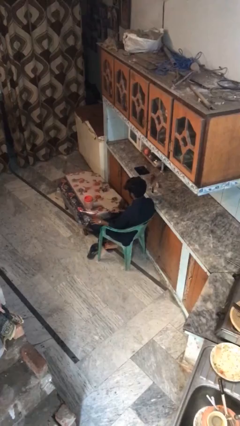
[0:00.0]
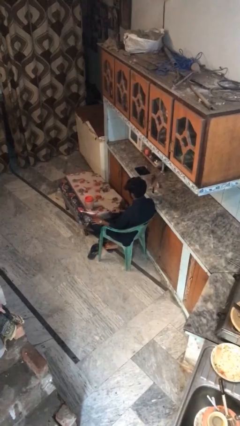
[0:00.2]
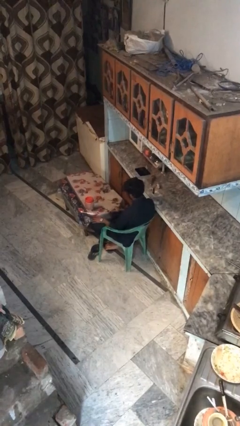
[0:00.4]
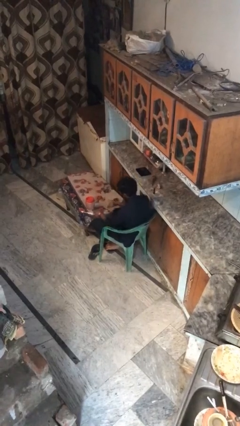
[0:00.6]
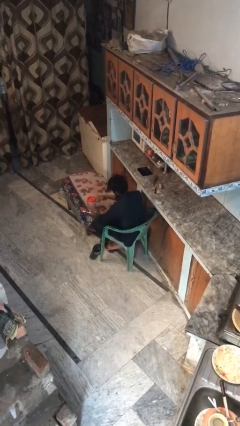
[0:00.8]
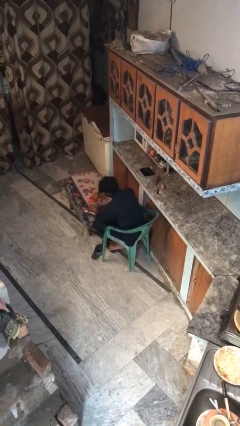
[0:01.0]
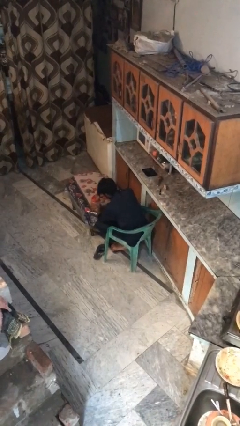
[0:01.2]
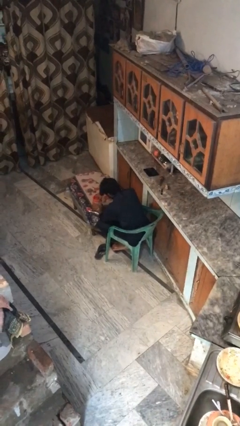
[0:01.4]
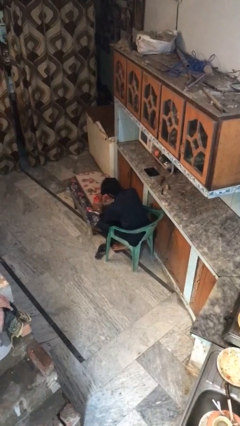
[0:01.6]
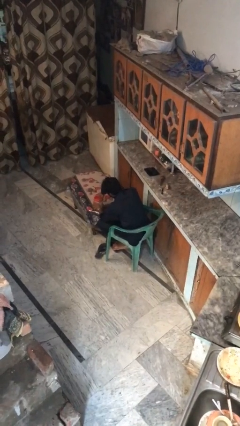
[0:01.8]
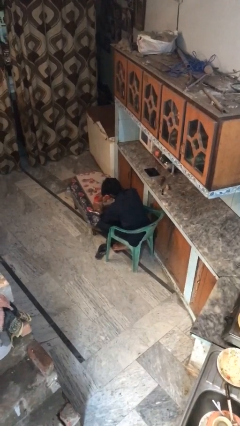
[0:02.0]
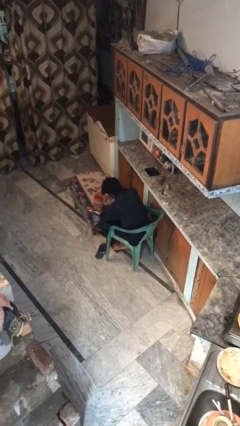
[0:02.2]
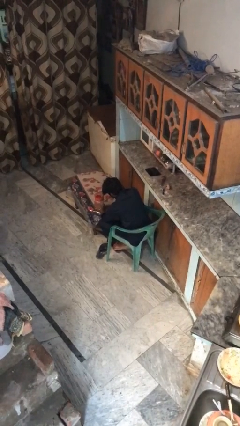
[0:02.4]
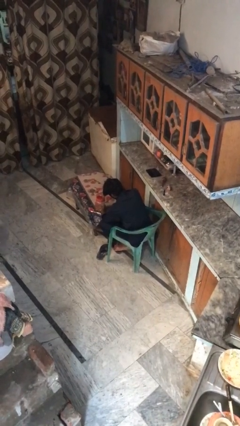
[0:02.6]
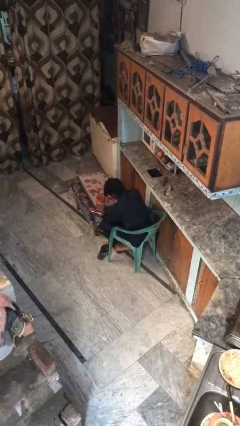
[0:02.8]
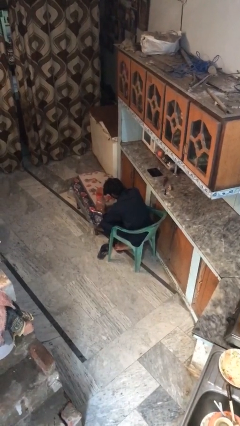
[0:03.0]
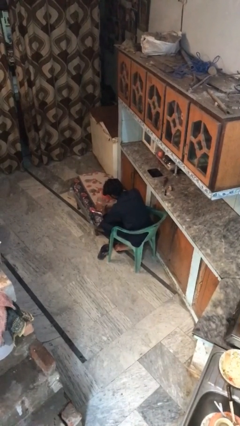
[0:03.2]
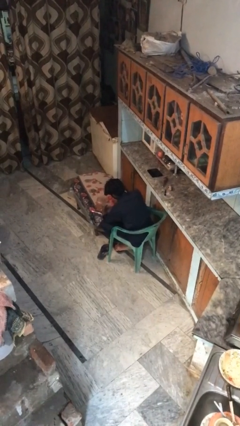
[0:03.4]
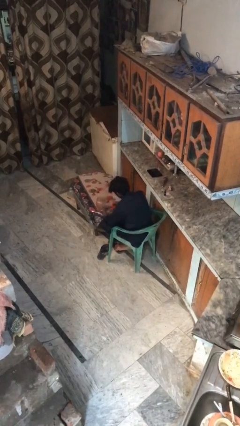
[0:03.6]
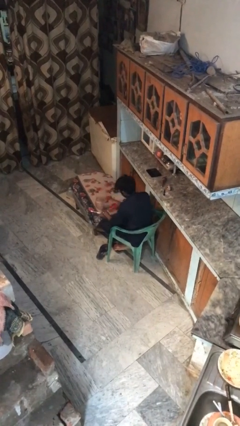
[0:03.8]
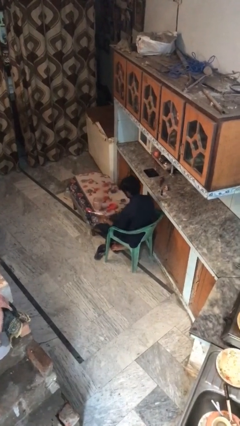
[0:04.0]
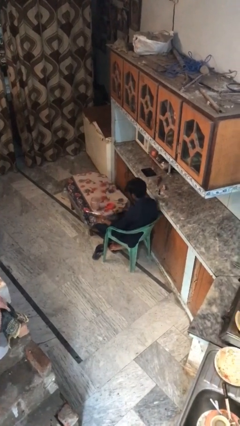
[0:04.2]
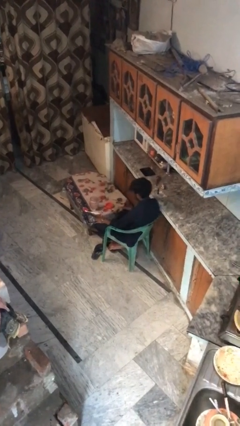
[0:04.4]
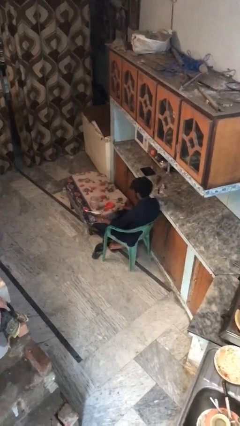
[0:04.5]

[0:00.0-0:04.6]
person opens jar

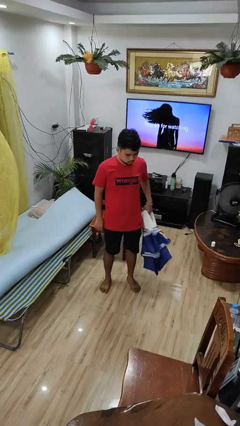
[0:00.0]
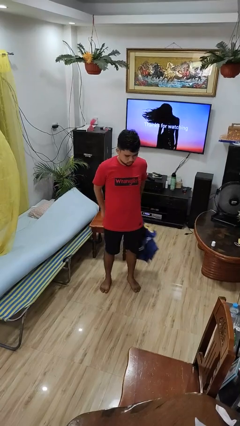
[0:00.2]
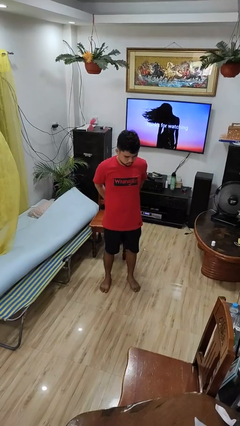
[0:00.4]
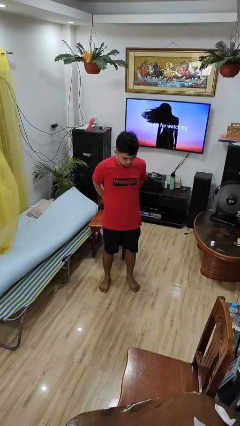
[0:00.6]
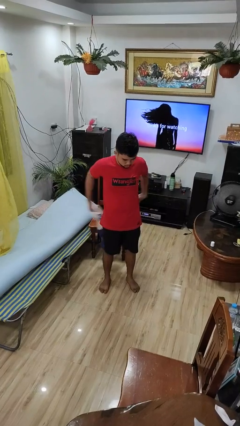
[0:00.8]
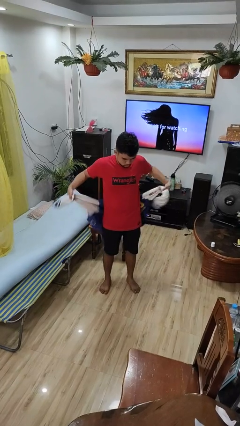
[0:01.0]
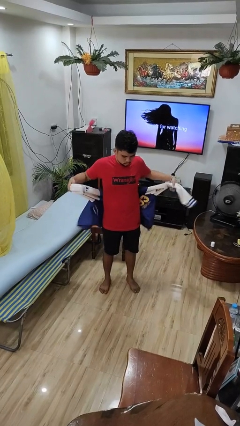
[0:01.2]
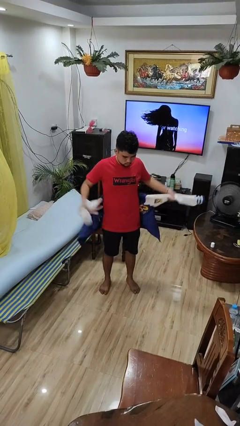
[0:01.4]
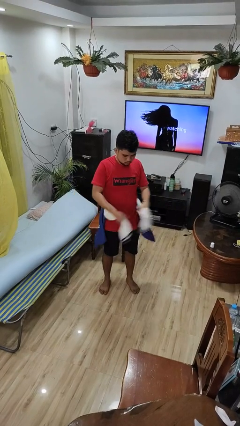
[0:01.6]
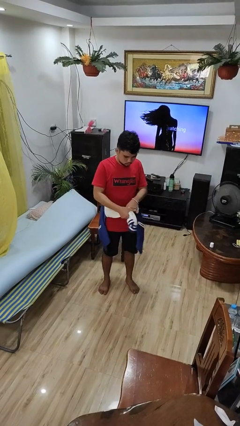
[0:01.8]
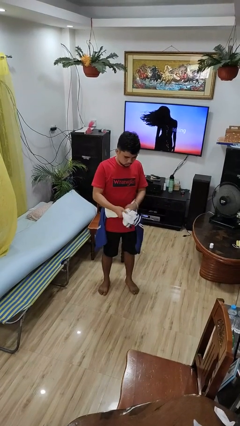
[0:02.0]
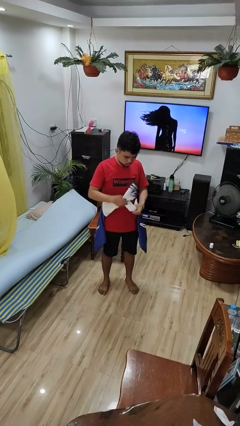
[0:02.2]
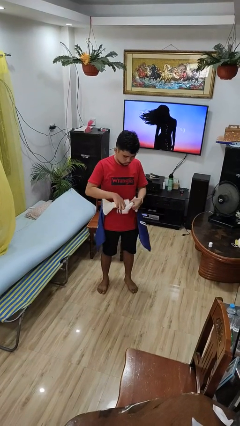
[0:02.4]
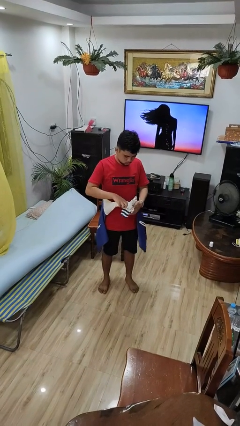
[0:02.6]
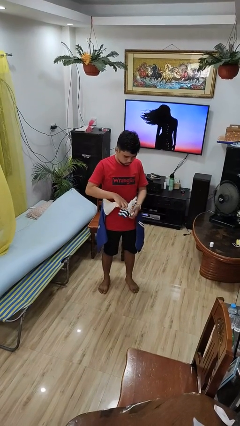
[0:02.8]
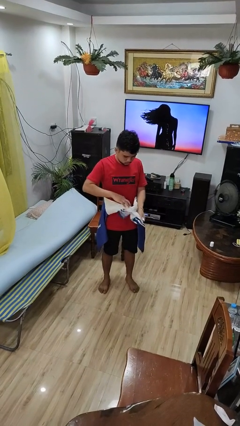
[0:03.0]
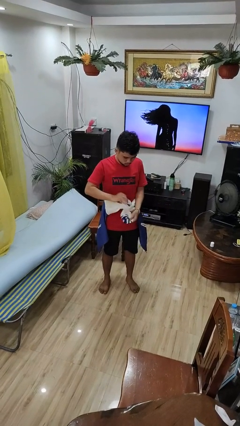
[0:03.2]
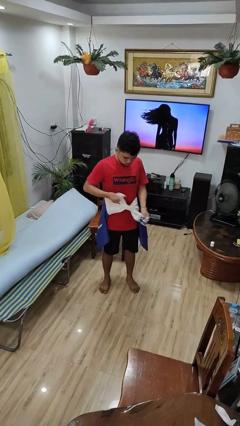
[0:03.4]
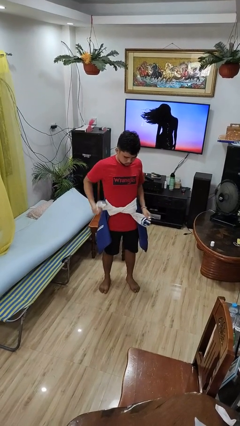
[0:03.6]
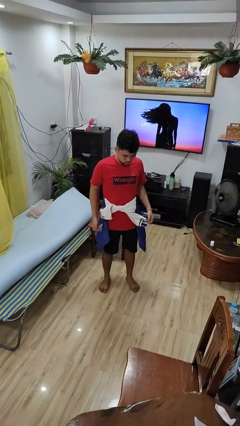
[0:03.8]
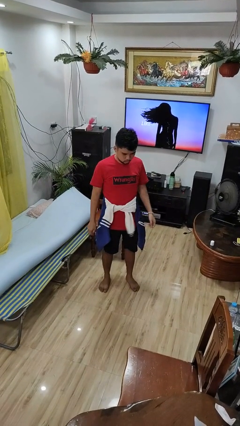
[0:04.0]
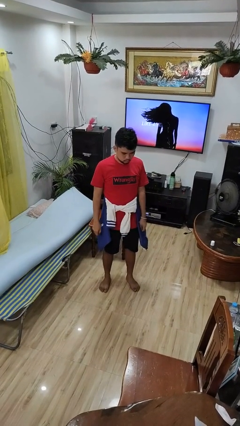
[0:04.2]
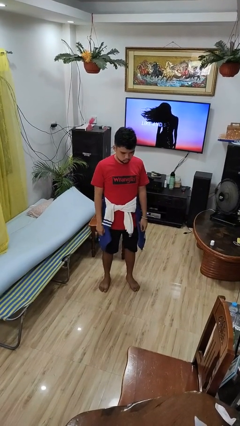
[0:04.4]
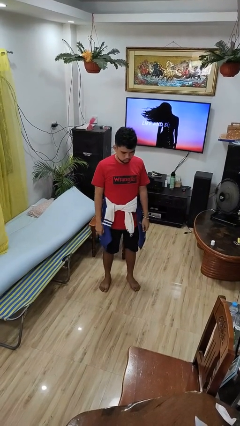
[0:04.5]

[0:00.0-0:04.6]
person ties jacket around waist

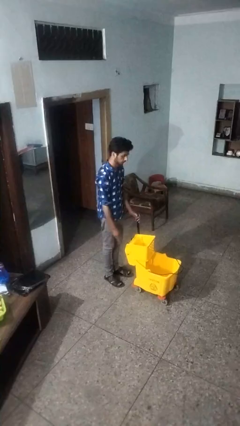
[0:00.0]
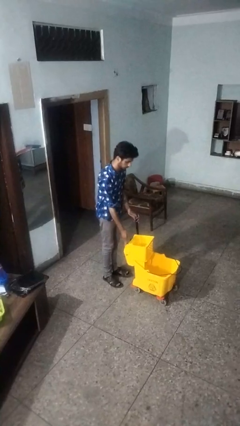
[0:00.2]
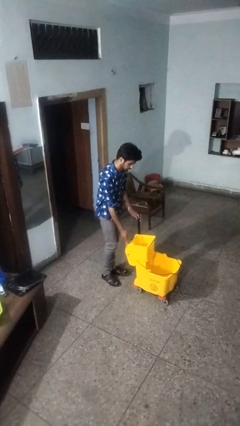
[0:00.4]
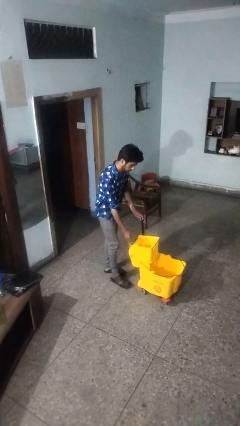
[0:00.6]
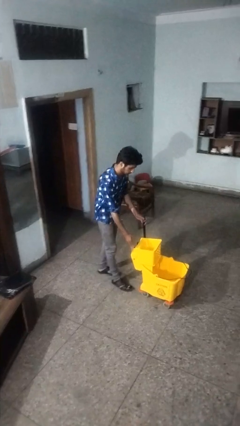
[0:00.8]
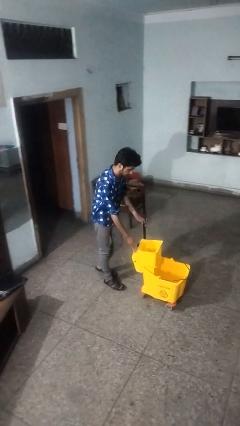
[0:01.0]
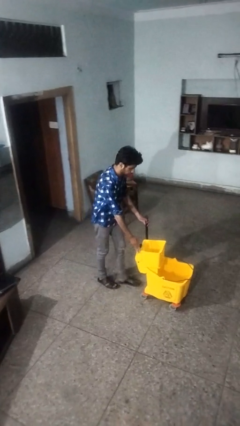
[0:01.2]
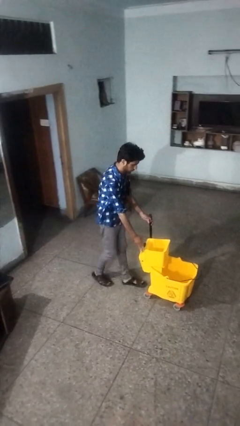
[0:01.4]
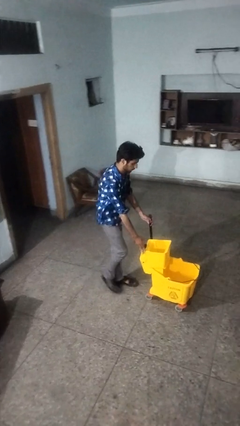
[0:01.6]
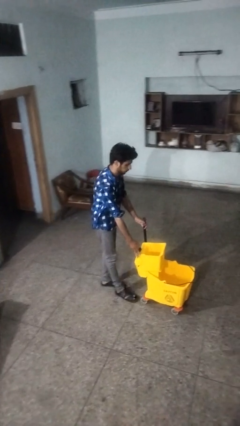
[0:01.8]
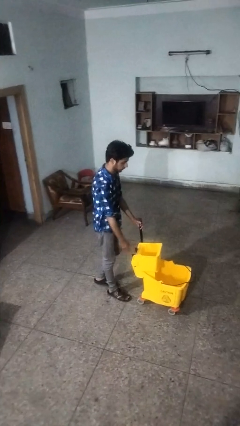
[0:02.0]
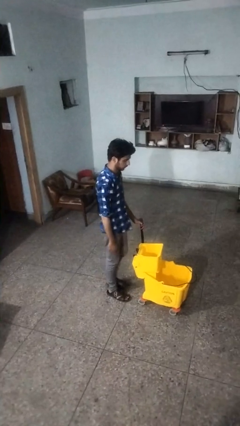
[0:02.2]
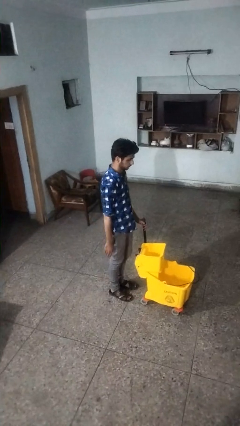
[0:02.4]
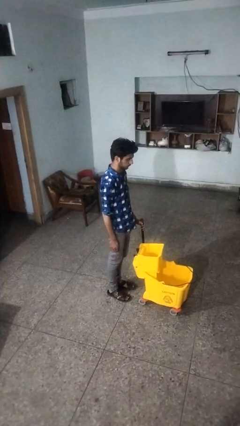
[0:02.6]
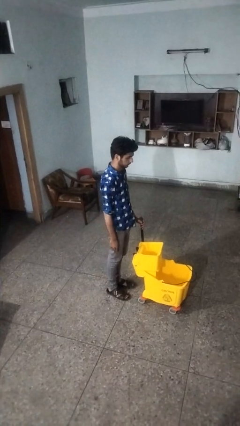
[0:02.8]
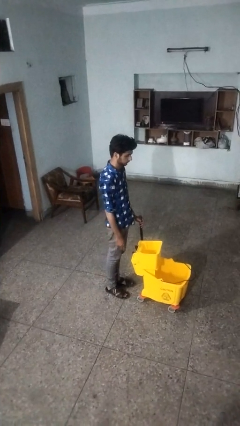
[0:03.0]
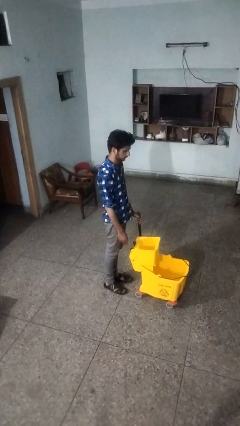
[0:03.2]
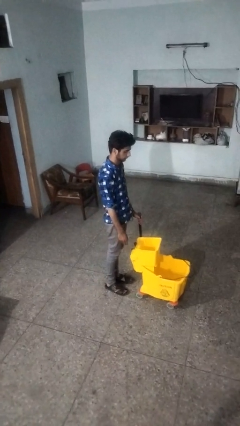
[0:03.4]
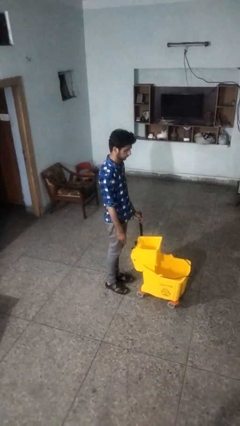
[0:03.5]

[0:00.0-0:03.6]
person pushes wheeled cart

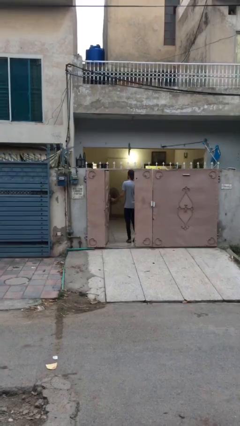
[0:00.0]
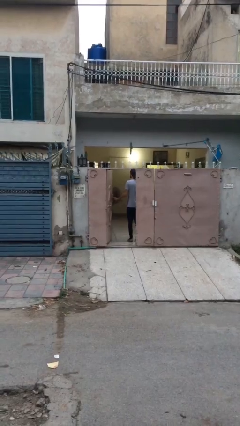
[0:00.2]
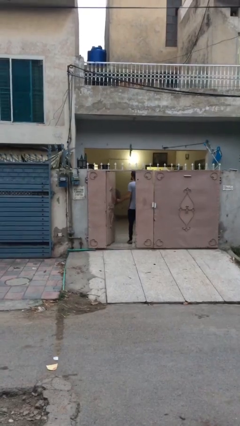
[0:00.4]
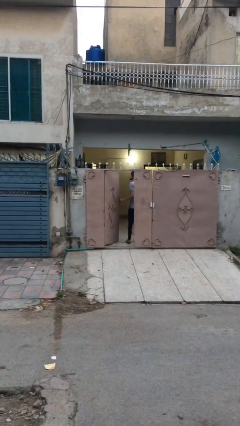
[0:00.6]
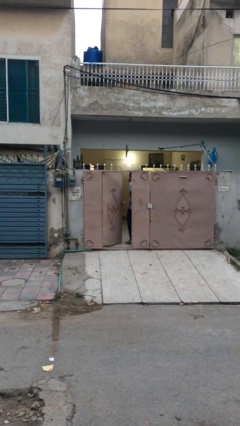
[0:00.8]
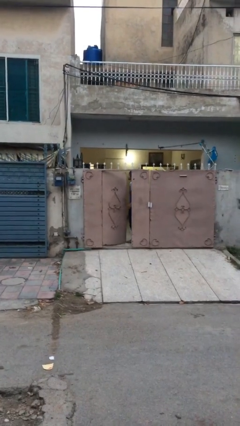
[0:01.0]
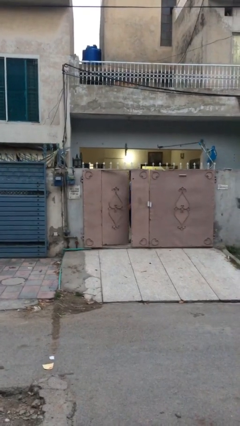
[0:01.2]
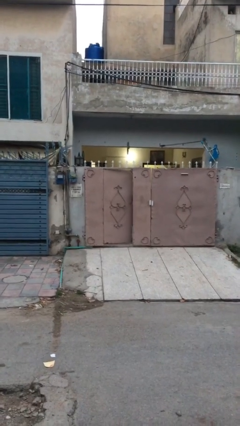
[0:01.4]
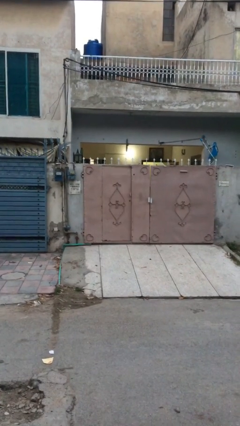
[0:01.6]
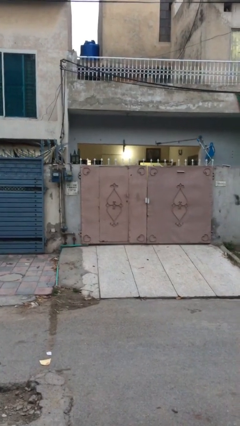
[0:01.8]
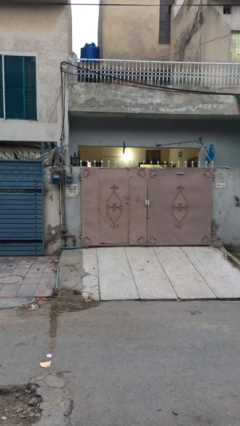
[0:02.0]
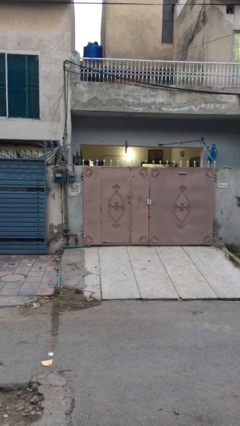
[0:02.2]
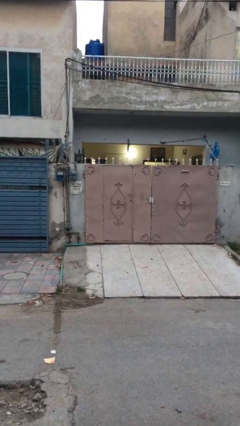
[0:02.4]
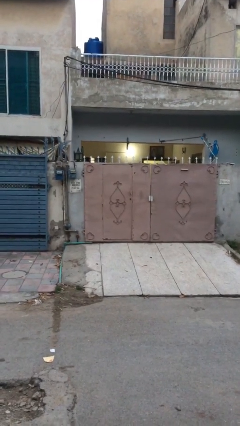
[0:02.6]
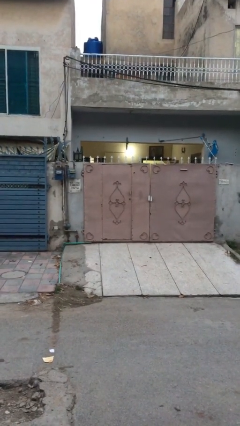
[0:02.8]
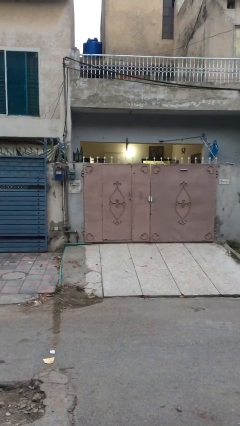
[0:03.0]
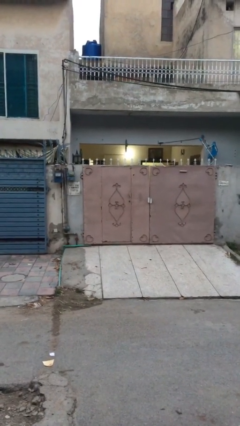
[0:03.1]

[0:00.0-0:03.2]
person closes facility door

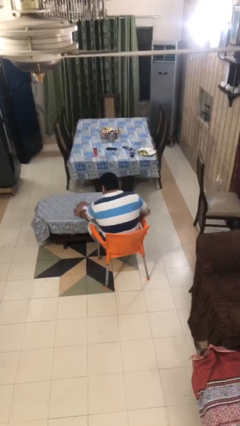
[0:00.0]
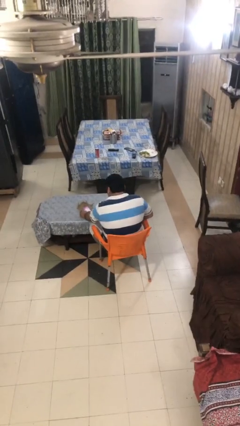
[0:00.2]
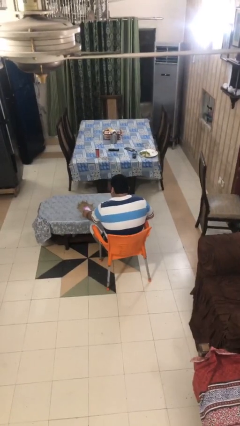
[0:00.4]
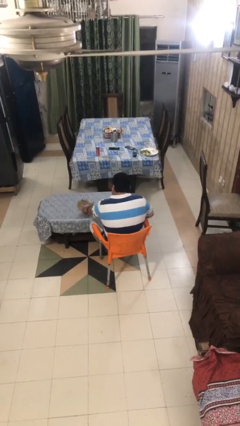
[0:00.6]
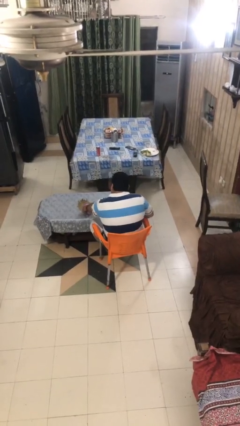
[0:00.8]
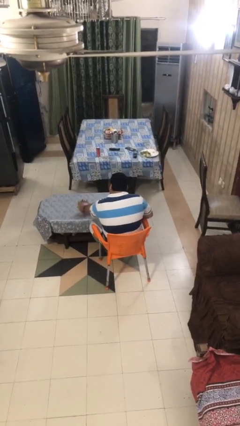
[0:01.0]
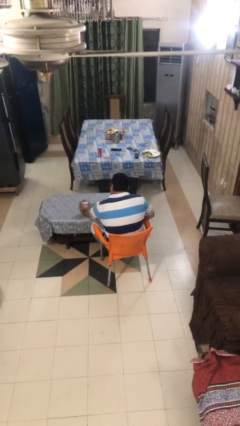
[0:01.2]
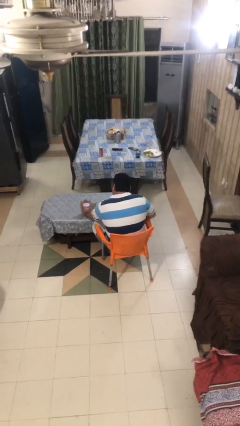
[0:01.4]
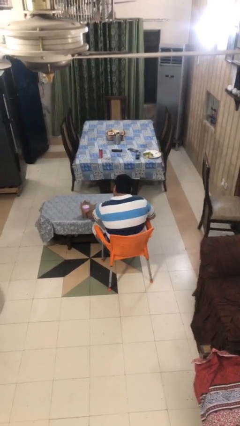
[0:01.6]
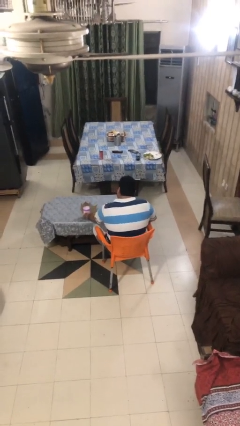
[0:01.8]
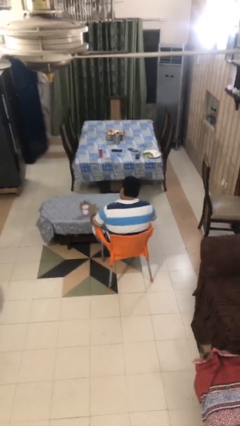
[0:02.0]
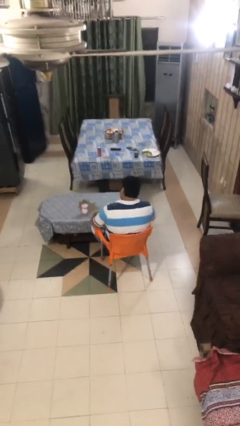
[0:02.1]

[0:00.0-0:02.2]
person sets upright glass

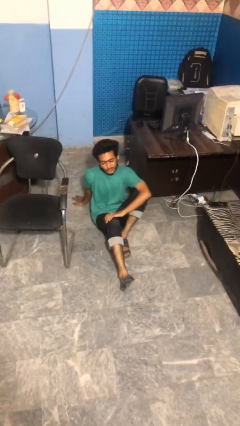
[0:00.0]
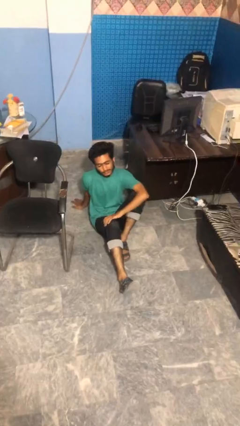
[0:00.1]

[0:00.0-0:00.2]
person stands up from floor
